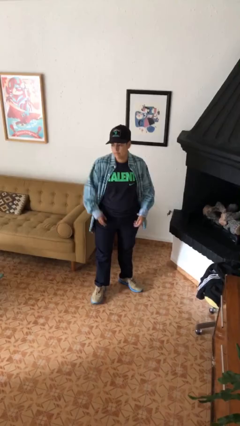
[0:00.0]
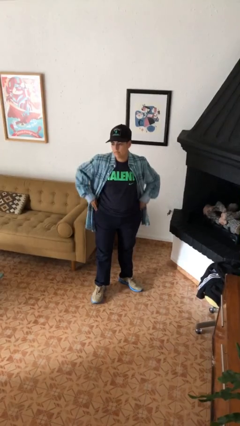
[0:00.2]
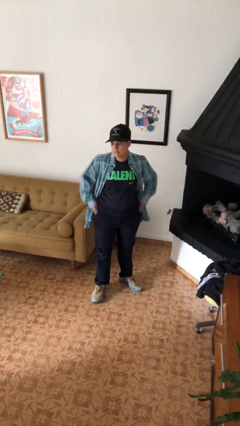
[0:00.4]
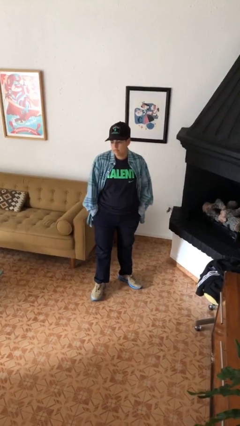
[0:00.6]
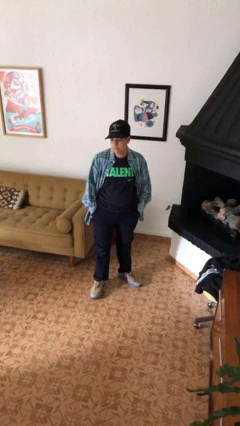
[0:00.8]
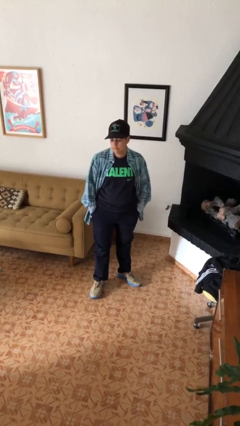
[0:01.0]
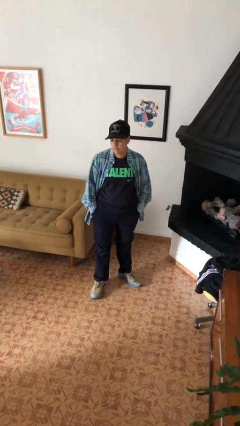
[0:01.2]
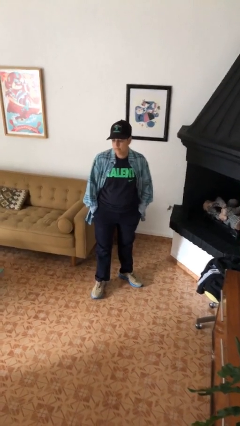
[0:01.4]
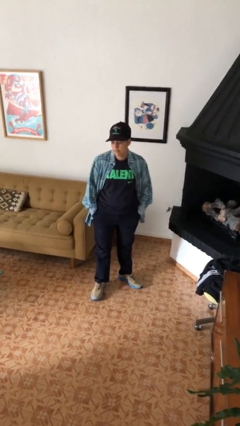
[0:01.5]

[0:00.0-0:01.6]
person puts hands in back pockets

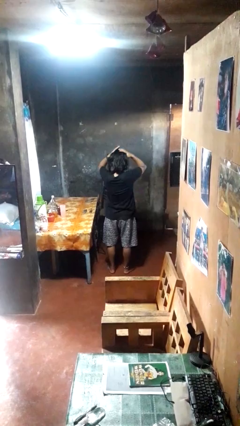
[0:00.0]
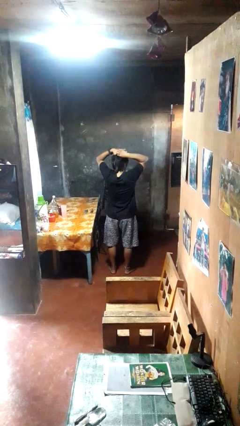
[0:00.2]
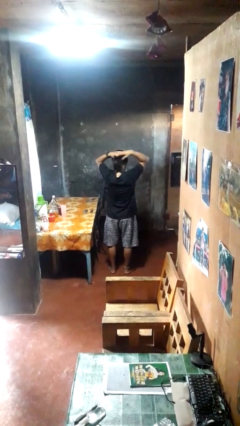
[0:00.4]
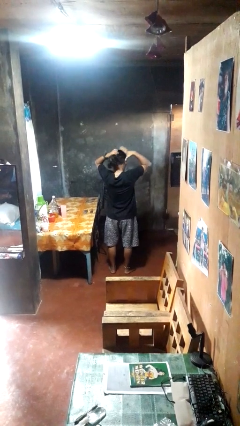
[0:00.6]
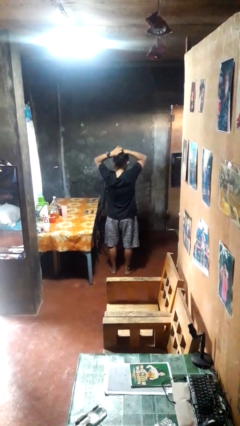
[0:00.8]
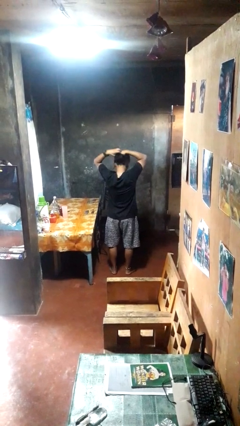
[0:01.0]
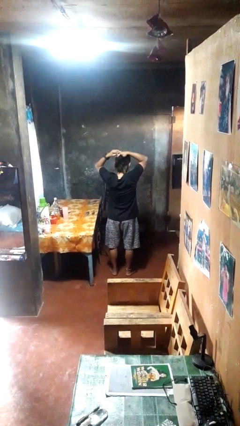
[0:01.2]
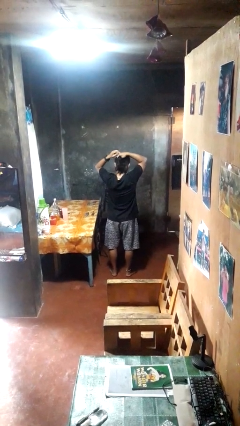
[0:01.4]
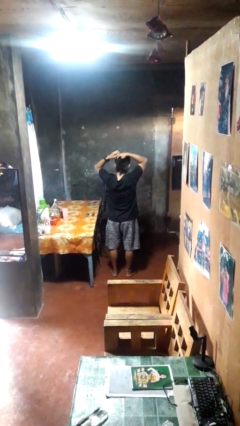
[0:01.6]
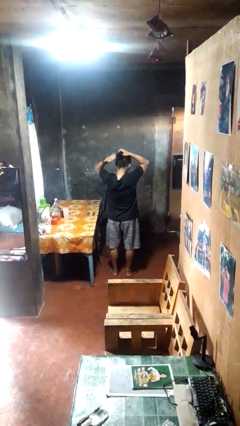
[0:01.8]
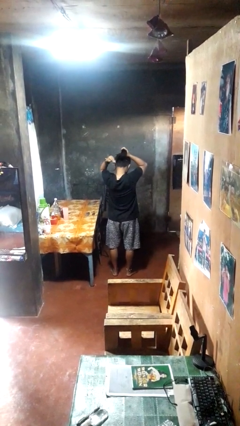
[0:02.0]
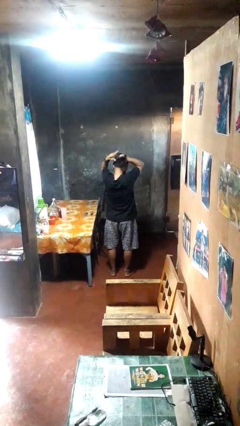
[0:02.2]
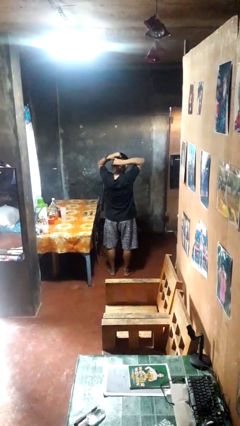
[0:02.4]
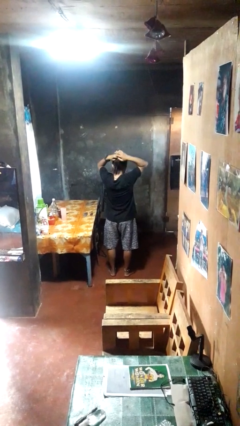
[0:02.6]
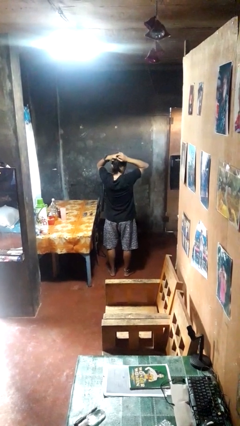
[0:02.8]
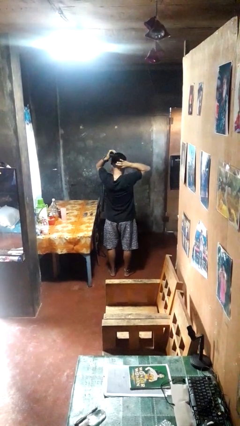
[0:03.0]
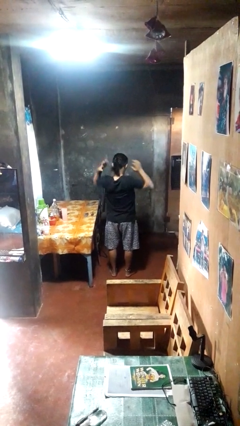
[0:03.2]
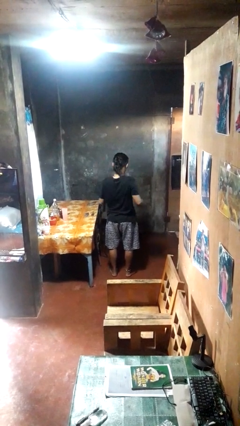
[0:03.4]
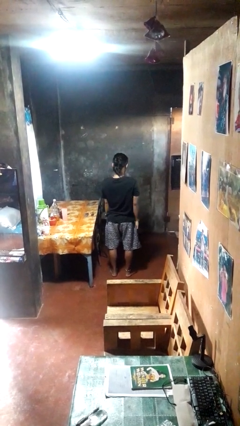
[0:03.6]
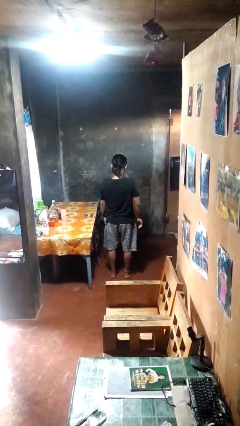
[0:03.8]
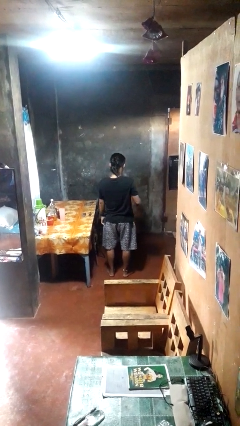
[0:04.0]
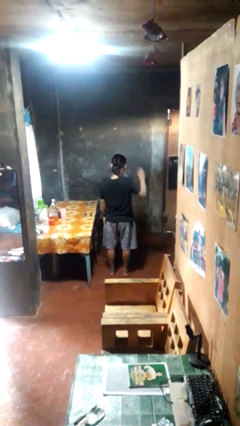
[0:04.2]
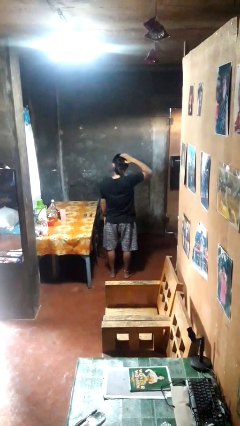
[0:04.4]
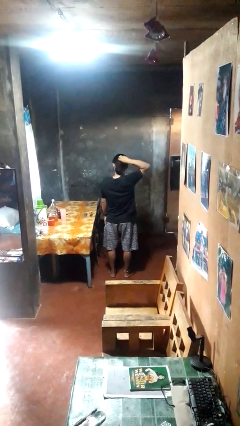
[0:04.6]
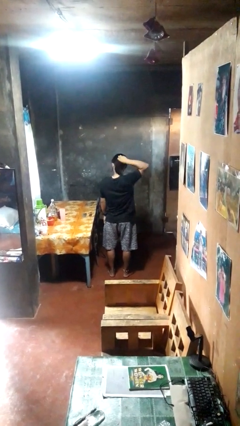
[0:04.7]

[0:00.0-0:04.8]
person puts hair in ponytail

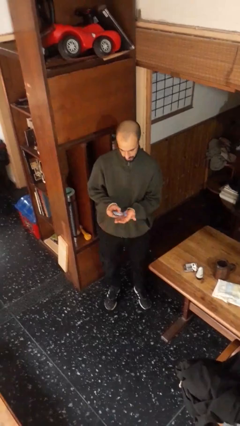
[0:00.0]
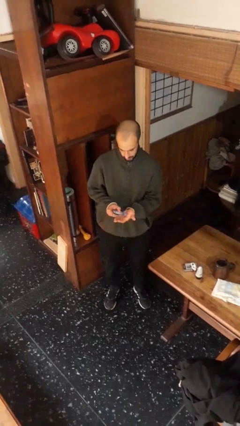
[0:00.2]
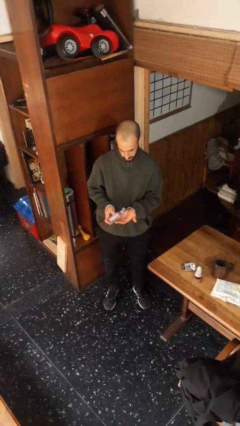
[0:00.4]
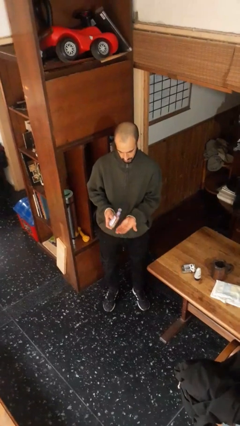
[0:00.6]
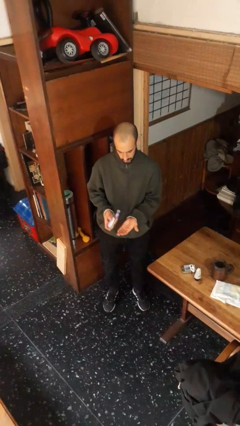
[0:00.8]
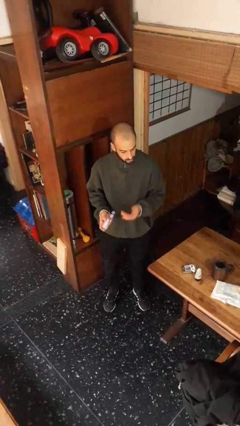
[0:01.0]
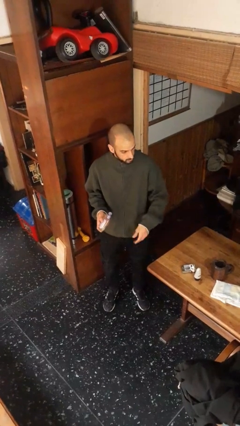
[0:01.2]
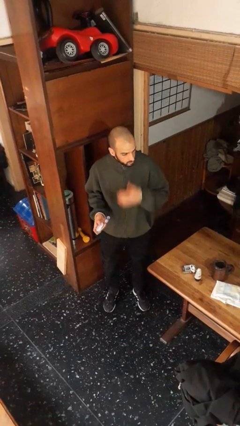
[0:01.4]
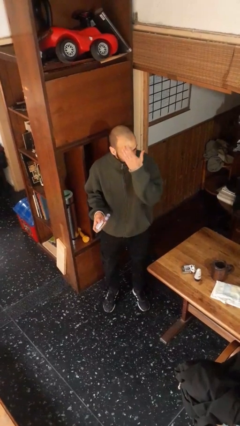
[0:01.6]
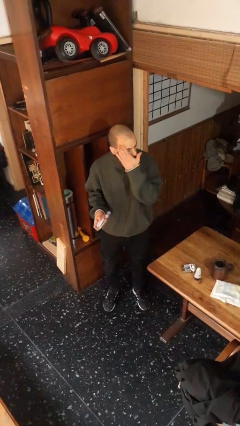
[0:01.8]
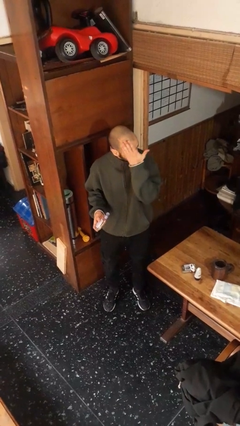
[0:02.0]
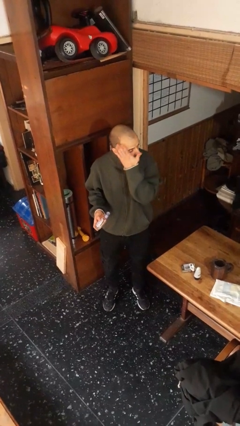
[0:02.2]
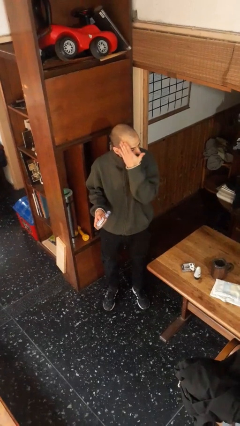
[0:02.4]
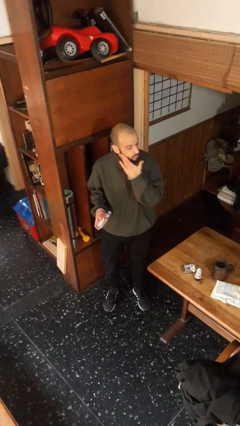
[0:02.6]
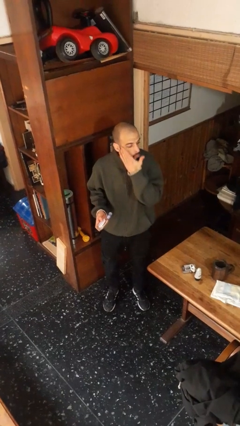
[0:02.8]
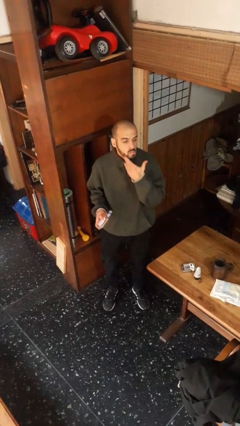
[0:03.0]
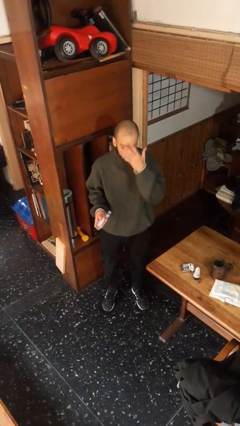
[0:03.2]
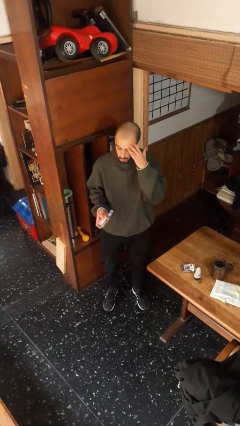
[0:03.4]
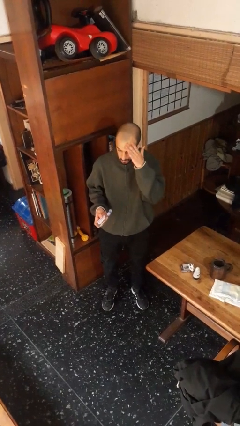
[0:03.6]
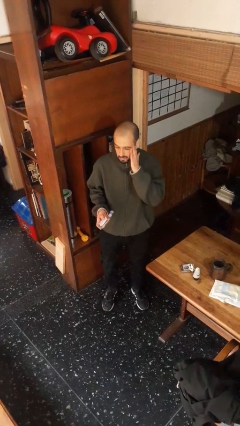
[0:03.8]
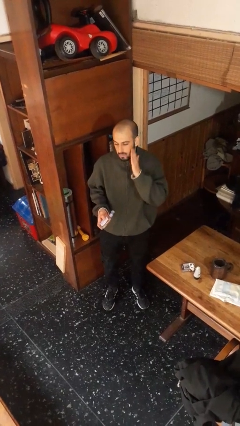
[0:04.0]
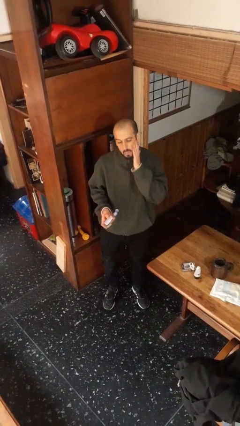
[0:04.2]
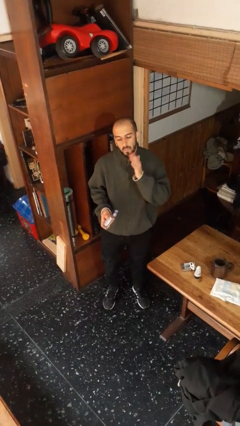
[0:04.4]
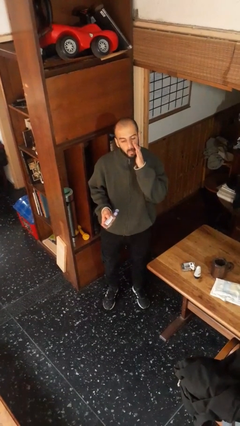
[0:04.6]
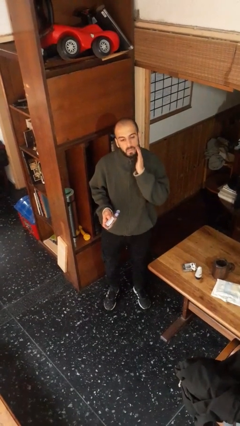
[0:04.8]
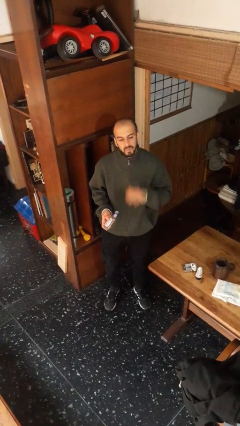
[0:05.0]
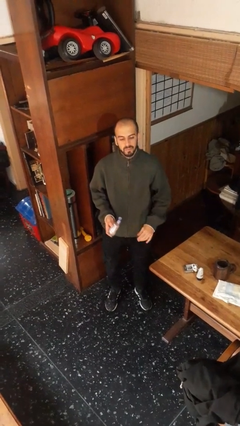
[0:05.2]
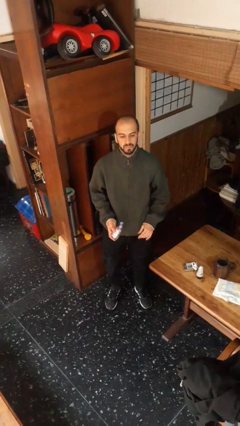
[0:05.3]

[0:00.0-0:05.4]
person applies facial moisturizer

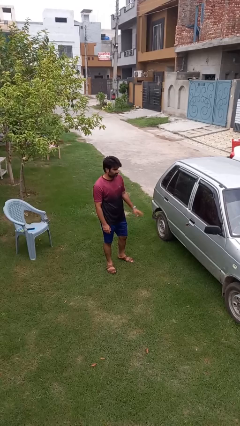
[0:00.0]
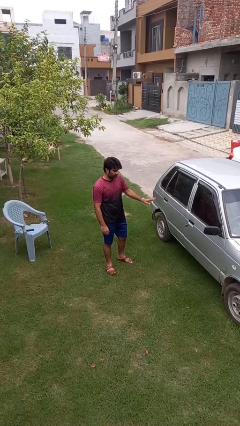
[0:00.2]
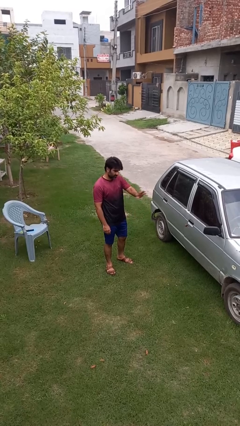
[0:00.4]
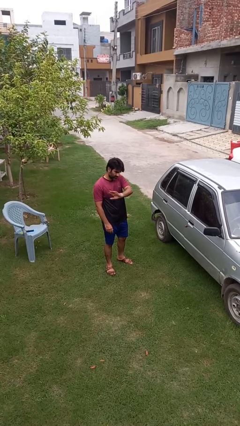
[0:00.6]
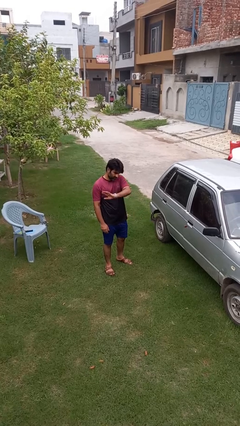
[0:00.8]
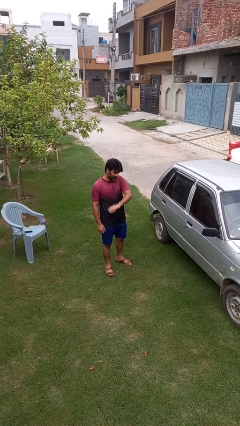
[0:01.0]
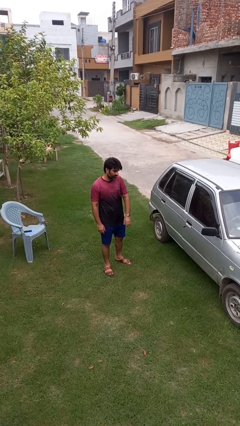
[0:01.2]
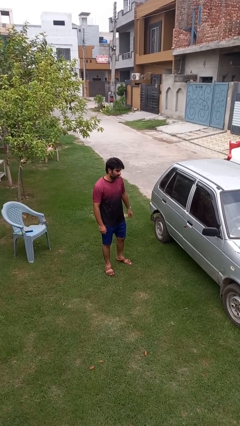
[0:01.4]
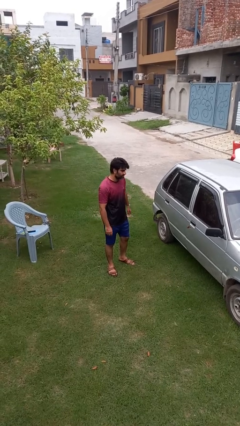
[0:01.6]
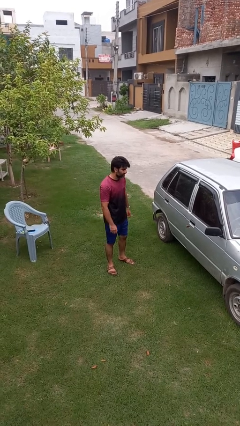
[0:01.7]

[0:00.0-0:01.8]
person gestures swipe right

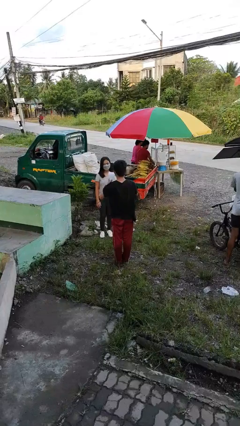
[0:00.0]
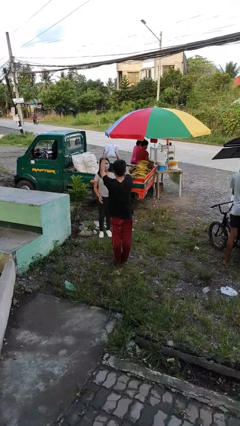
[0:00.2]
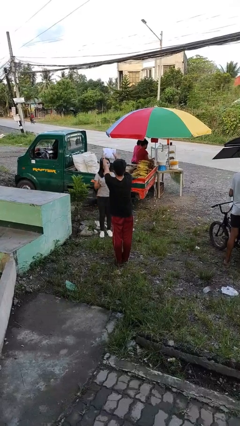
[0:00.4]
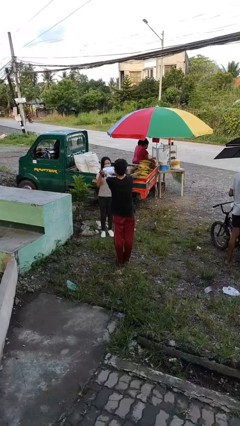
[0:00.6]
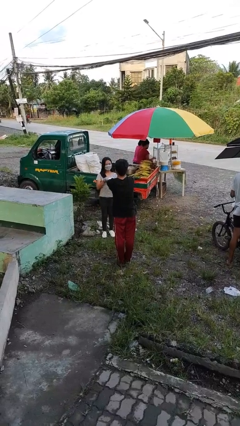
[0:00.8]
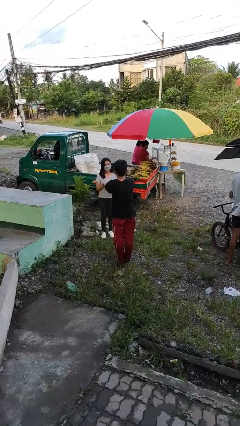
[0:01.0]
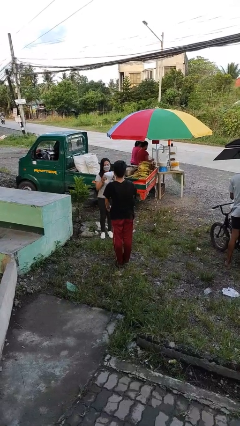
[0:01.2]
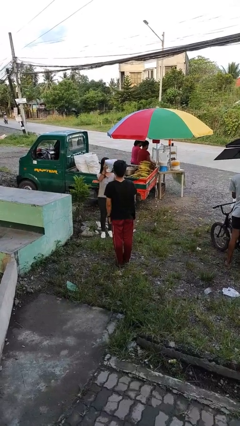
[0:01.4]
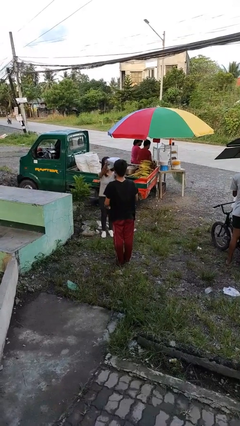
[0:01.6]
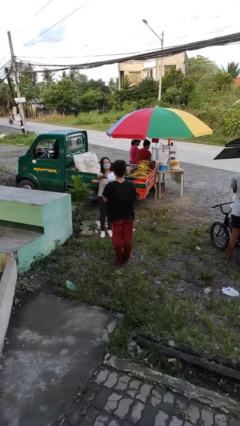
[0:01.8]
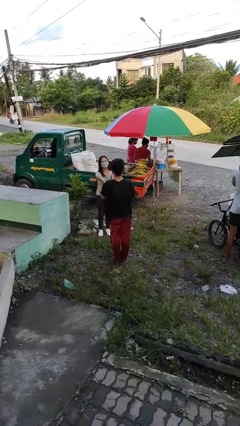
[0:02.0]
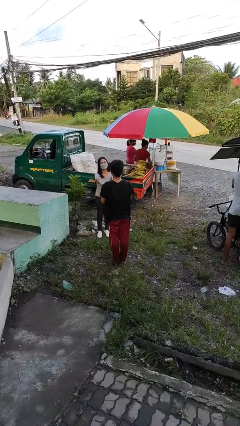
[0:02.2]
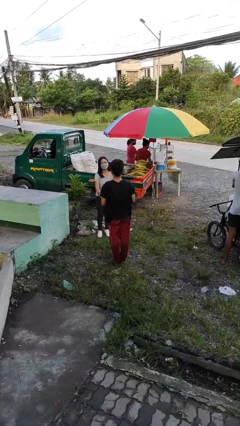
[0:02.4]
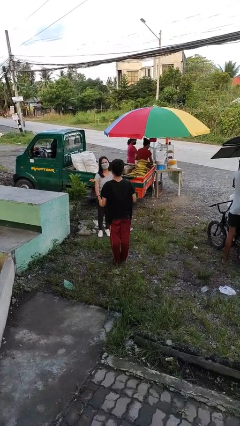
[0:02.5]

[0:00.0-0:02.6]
person transfers object to person

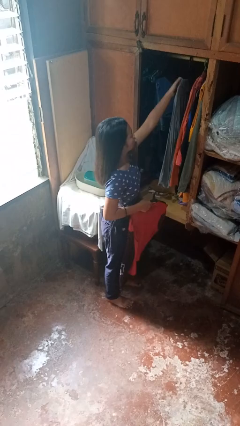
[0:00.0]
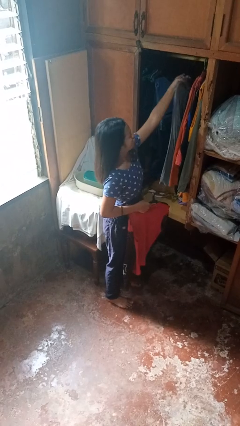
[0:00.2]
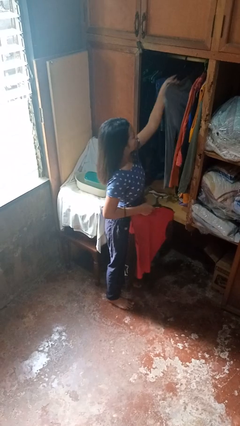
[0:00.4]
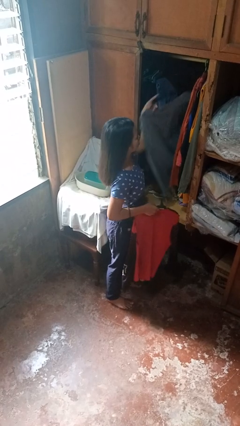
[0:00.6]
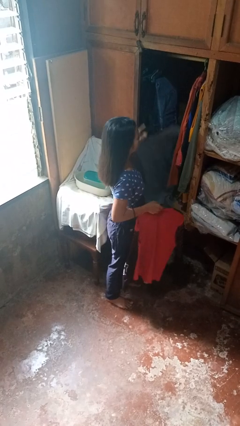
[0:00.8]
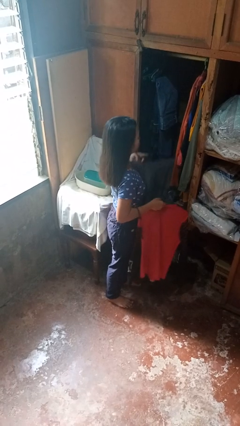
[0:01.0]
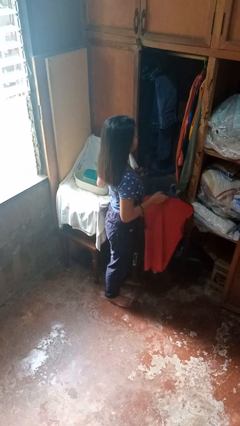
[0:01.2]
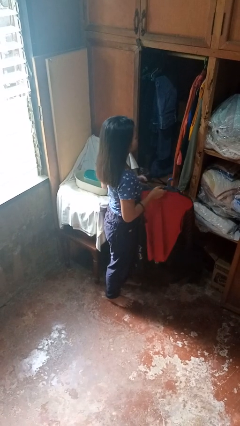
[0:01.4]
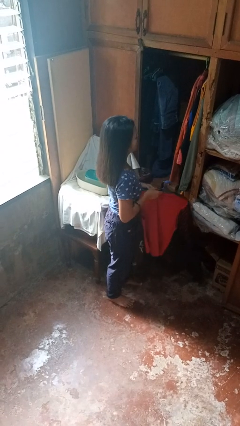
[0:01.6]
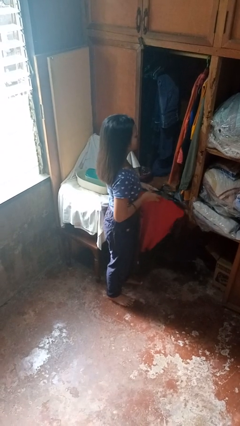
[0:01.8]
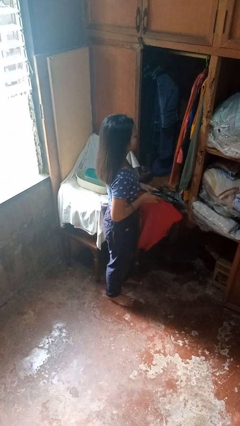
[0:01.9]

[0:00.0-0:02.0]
person takes clothes from closet
